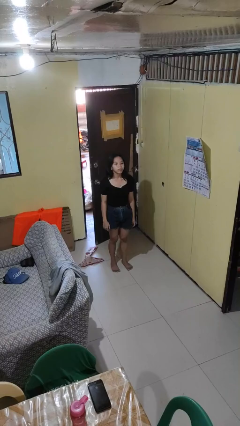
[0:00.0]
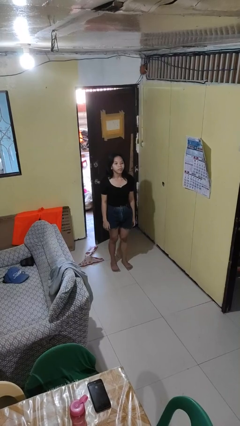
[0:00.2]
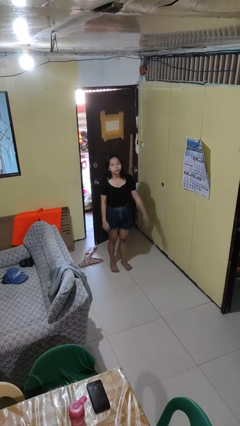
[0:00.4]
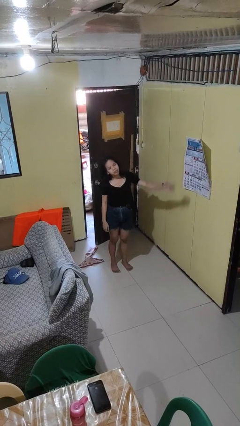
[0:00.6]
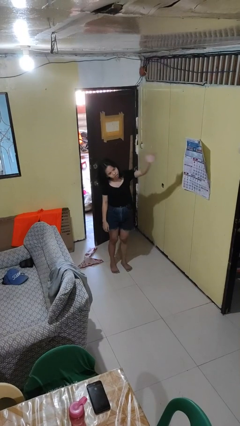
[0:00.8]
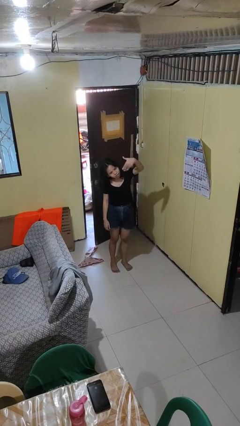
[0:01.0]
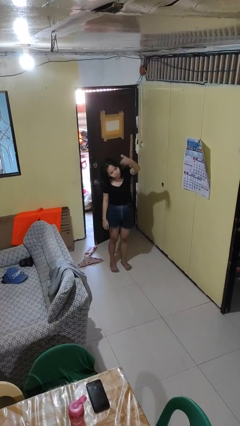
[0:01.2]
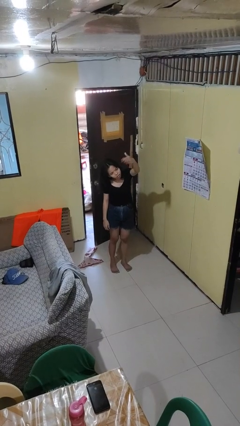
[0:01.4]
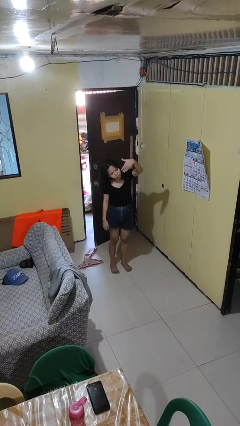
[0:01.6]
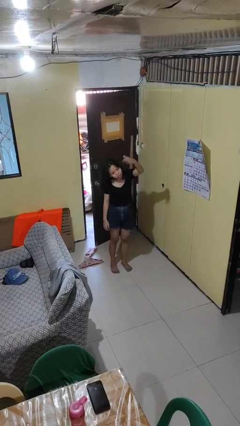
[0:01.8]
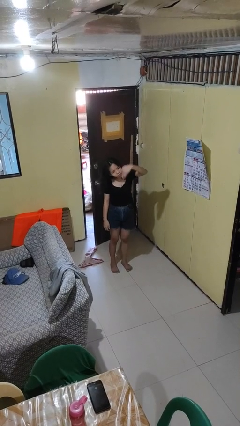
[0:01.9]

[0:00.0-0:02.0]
person gestures come here

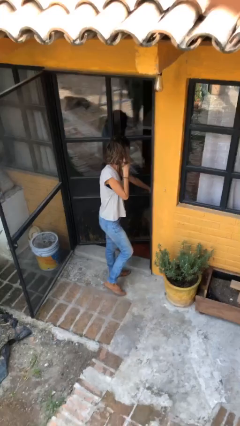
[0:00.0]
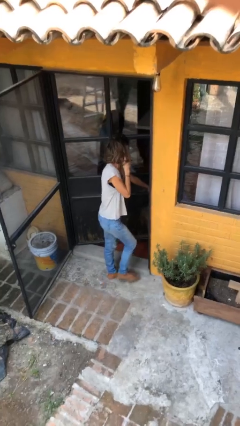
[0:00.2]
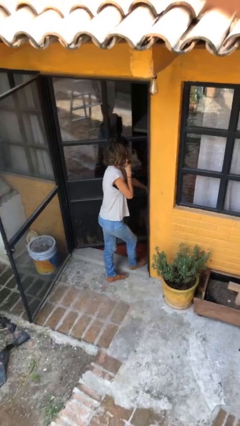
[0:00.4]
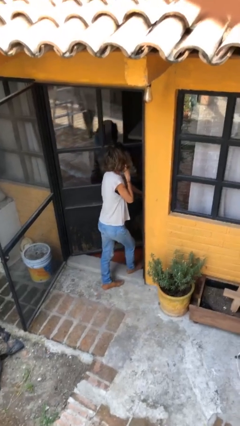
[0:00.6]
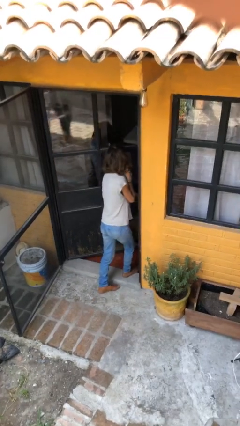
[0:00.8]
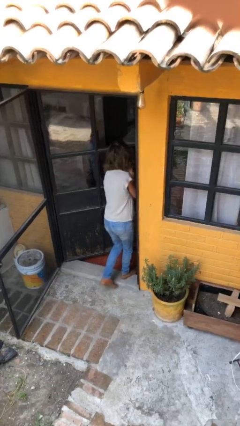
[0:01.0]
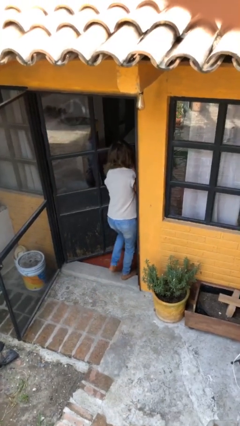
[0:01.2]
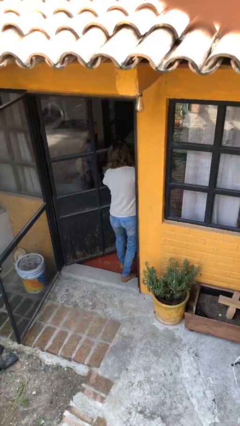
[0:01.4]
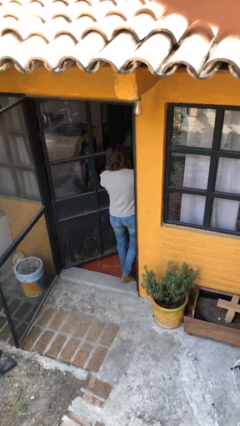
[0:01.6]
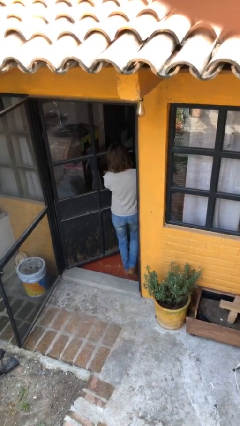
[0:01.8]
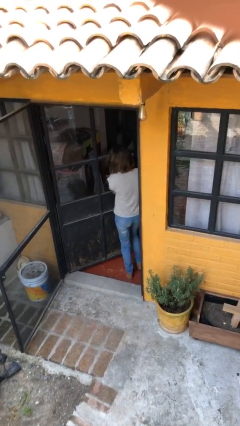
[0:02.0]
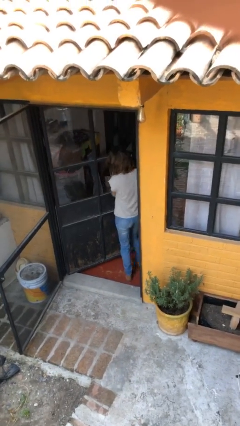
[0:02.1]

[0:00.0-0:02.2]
person exits scene through structure

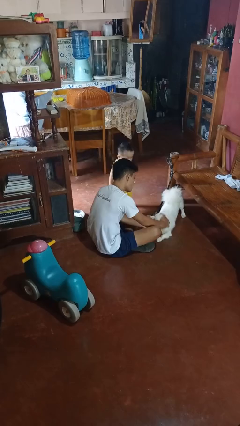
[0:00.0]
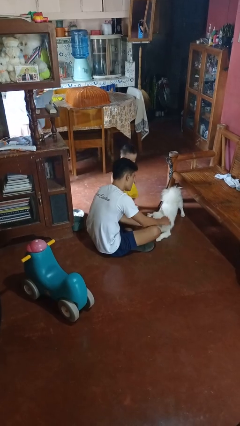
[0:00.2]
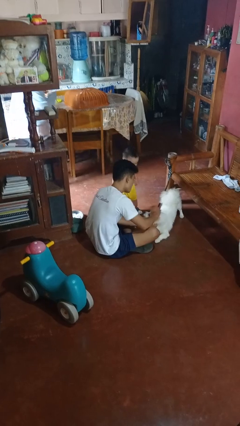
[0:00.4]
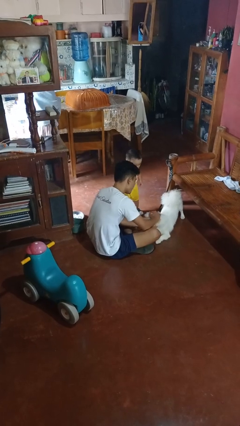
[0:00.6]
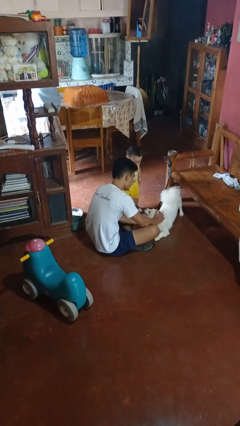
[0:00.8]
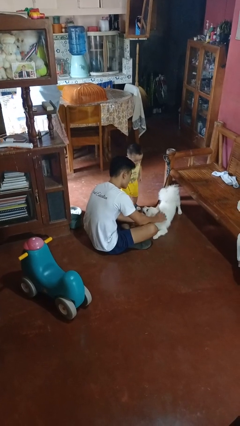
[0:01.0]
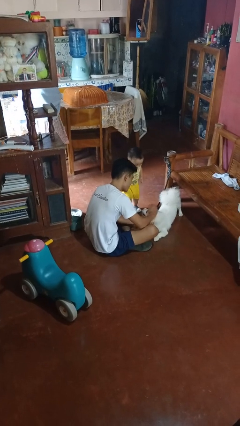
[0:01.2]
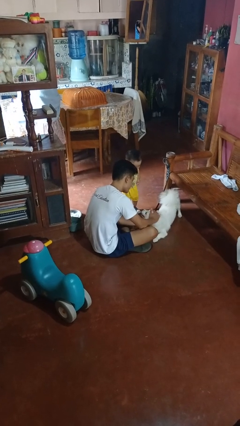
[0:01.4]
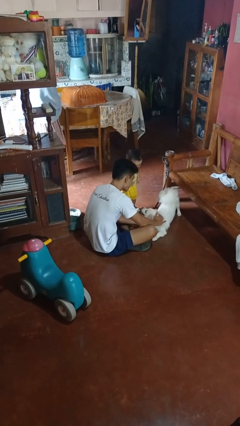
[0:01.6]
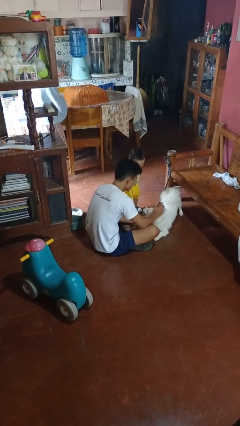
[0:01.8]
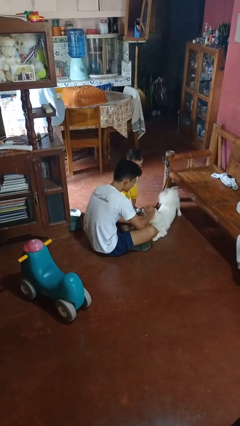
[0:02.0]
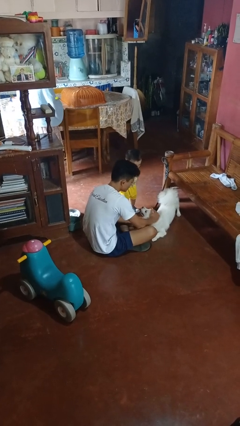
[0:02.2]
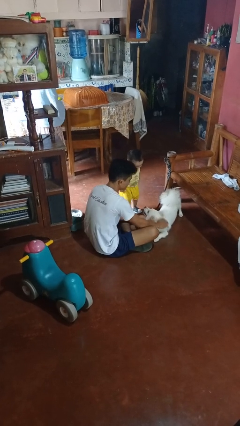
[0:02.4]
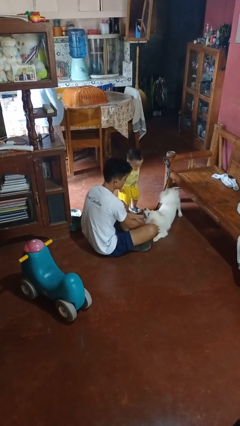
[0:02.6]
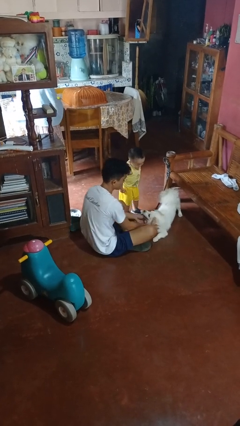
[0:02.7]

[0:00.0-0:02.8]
person pets dog

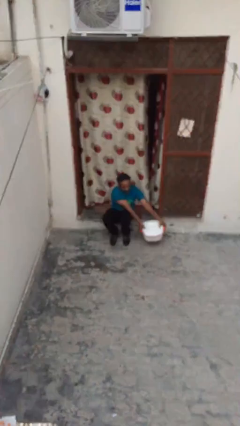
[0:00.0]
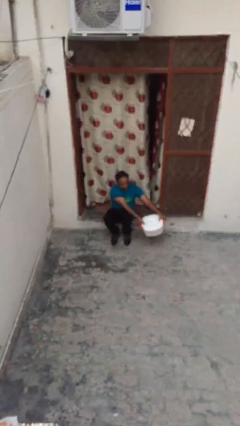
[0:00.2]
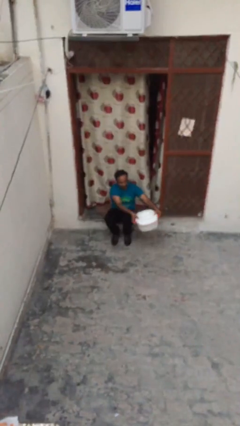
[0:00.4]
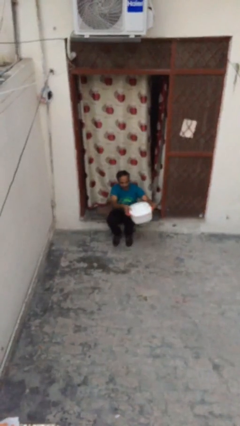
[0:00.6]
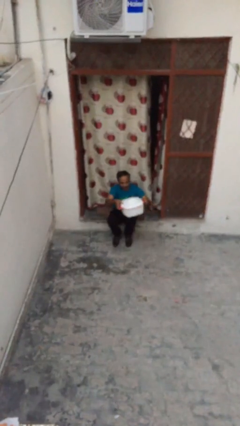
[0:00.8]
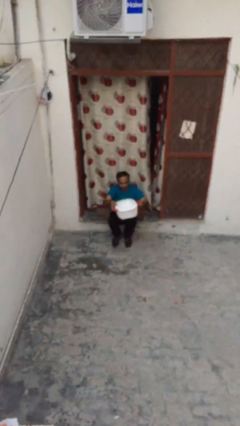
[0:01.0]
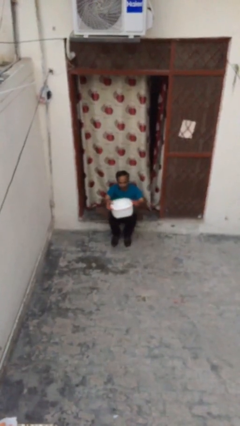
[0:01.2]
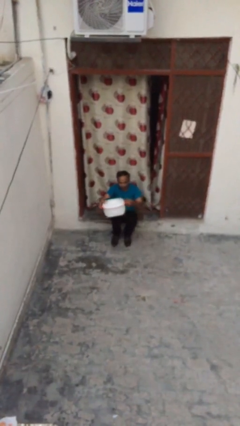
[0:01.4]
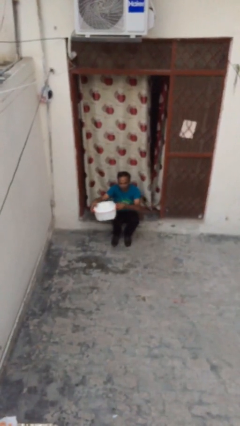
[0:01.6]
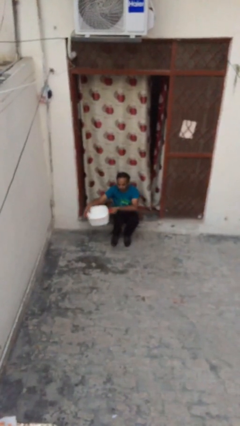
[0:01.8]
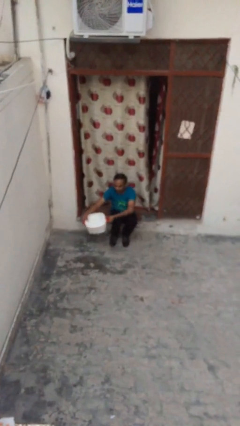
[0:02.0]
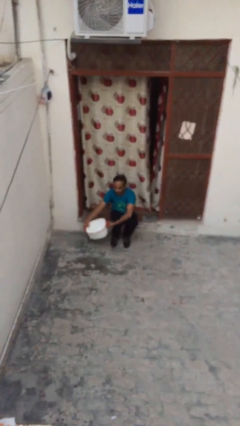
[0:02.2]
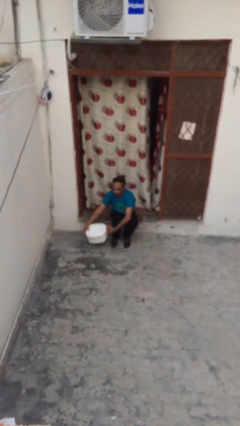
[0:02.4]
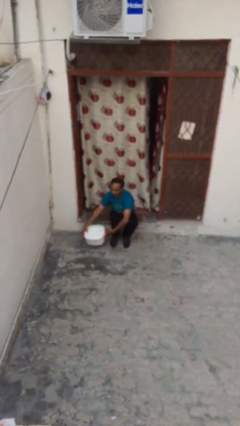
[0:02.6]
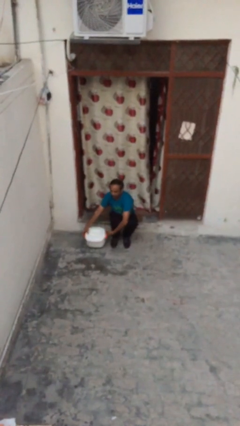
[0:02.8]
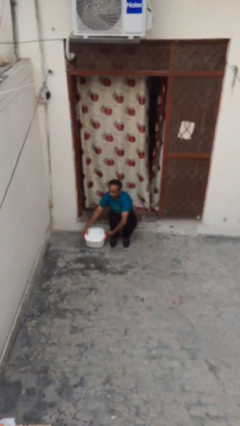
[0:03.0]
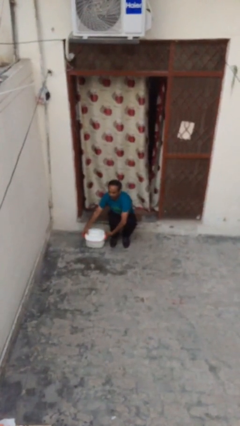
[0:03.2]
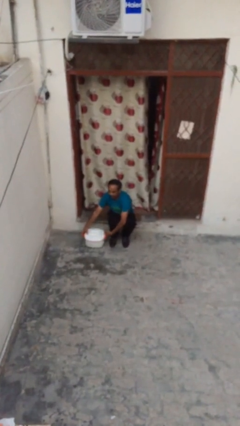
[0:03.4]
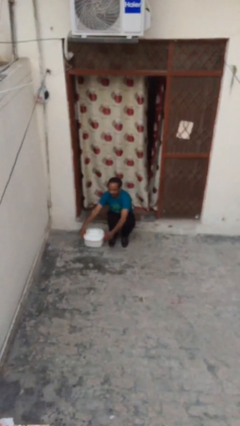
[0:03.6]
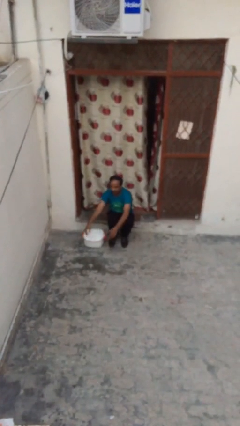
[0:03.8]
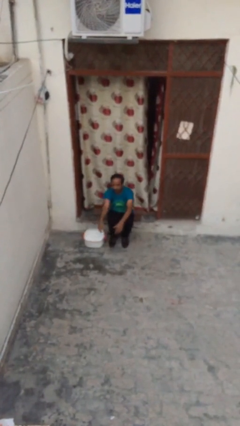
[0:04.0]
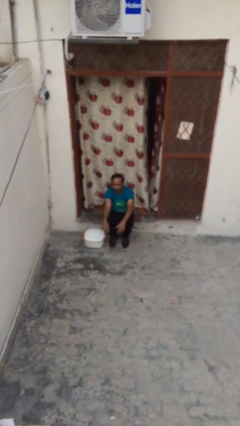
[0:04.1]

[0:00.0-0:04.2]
person puts down object on floor

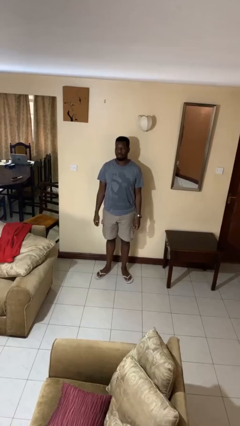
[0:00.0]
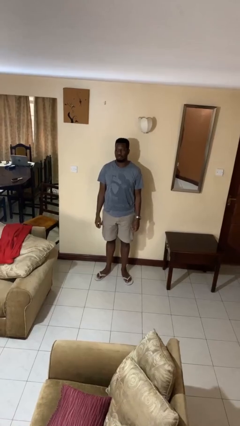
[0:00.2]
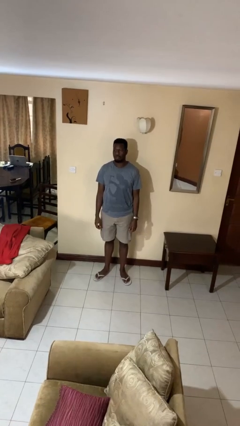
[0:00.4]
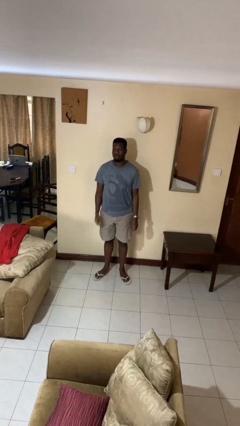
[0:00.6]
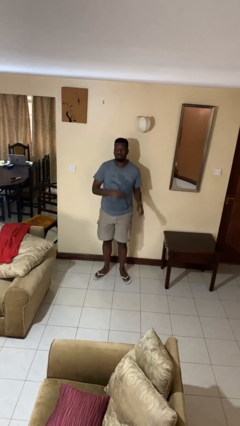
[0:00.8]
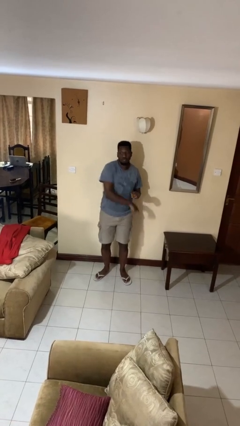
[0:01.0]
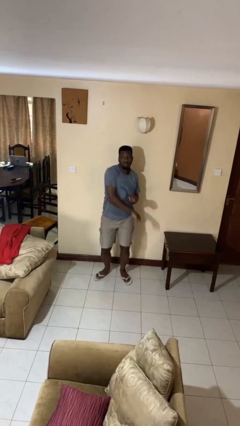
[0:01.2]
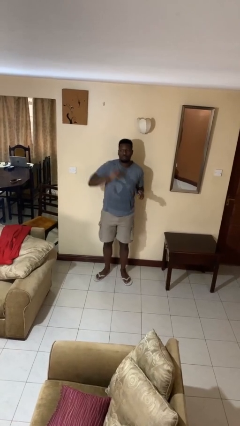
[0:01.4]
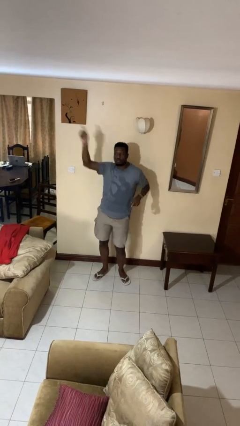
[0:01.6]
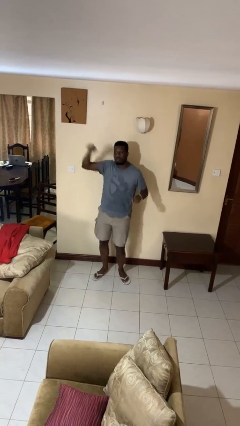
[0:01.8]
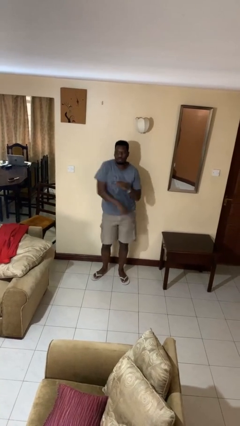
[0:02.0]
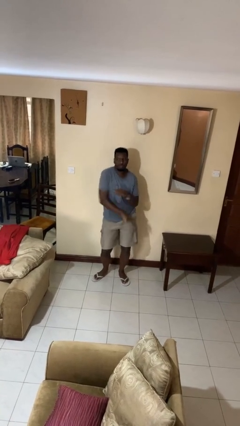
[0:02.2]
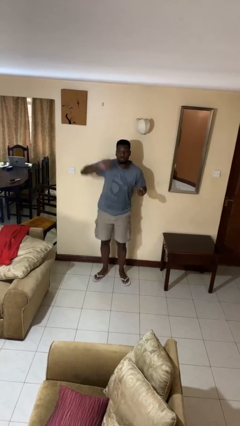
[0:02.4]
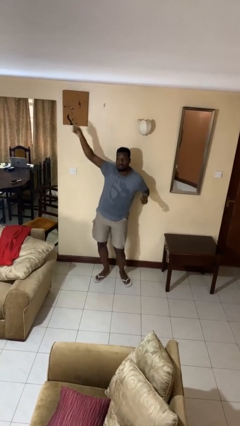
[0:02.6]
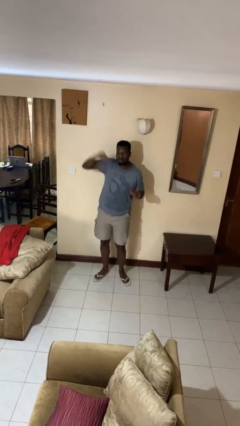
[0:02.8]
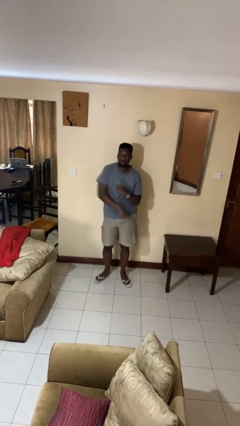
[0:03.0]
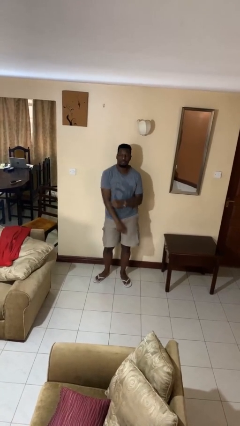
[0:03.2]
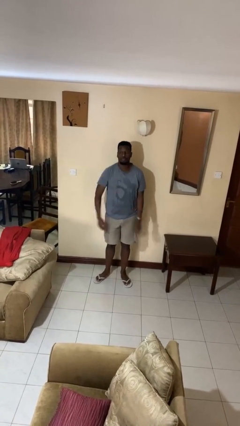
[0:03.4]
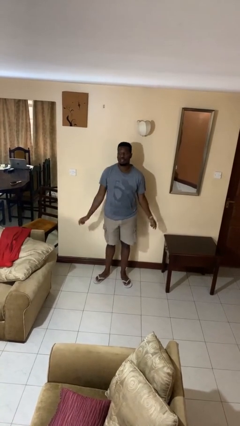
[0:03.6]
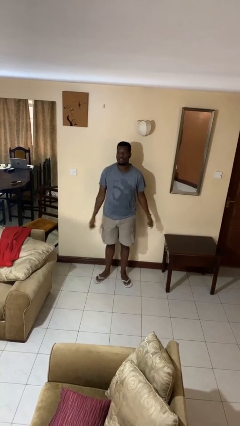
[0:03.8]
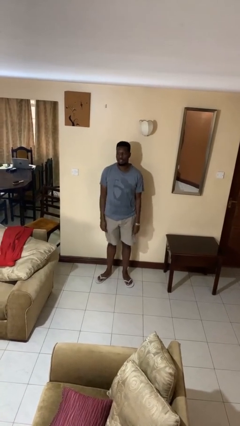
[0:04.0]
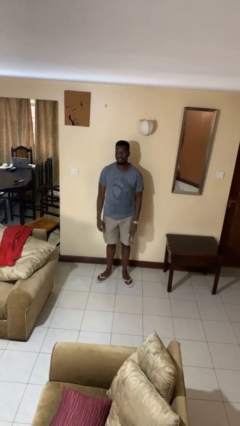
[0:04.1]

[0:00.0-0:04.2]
person dances in place

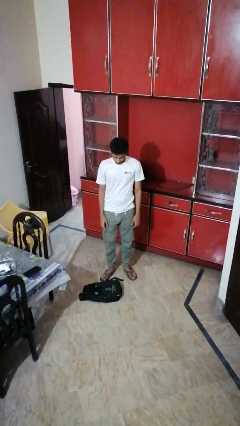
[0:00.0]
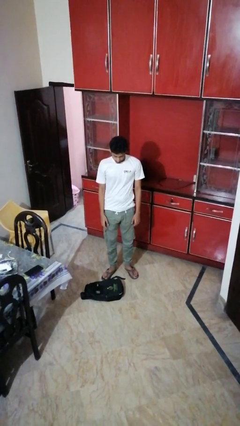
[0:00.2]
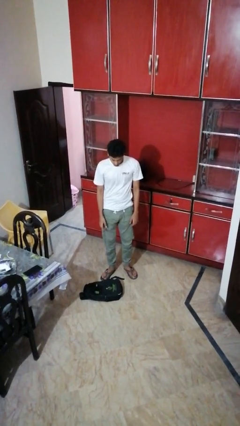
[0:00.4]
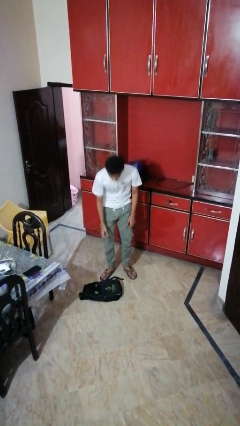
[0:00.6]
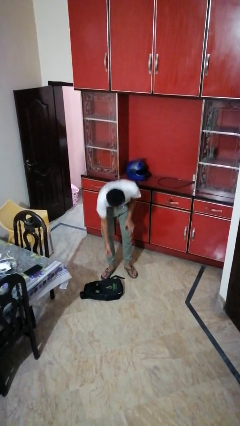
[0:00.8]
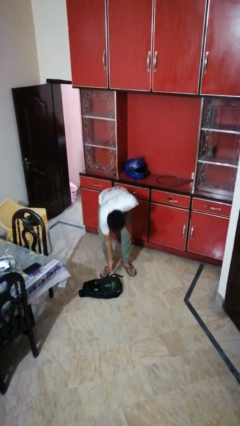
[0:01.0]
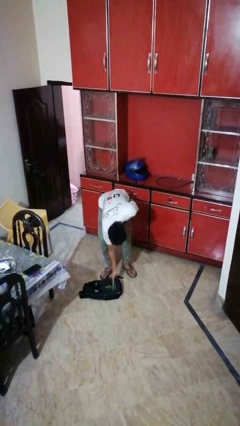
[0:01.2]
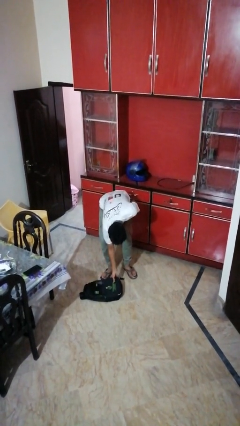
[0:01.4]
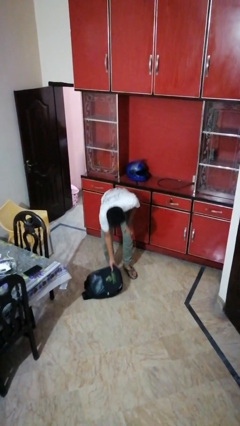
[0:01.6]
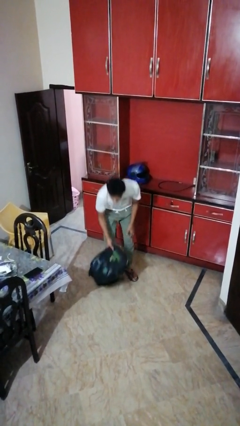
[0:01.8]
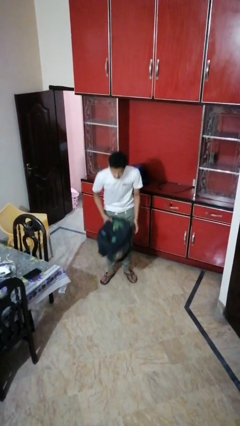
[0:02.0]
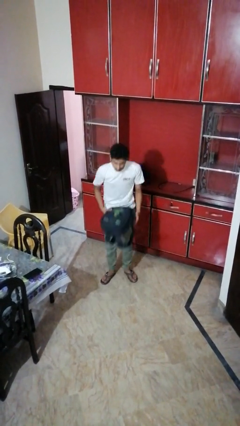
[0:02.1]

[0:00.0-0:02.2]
person picks up object from floor
